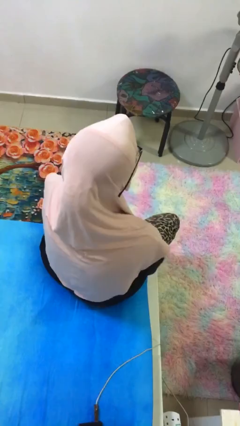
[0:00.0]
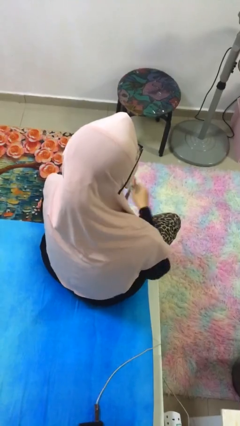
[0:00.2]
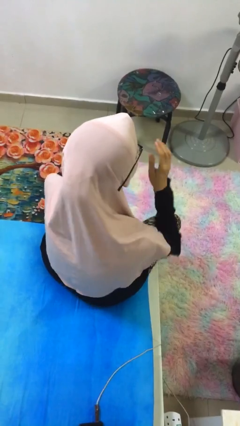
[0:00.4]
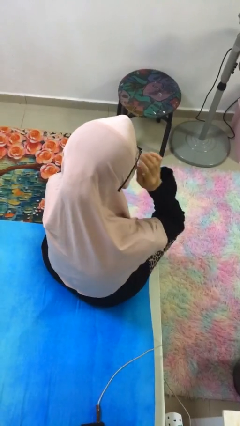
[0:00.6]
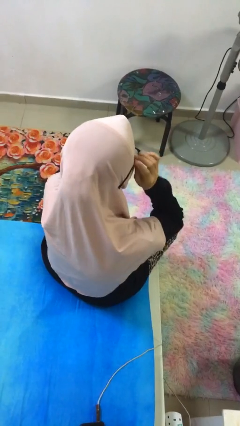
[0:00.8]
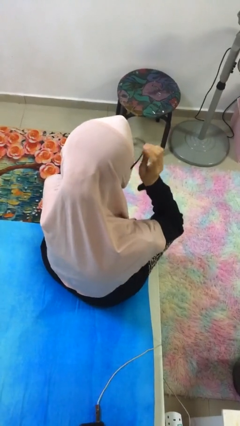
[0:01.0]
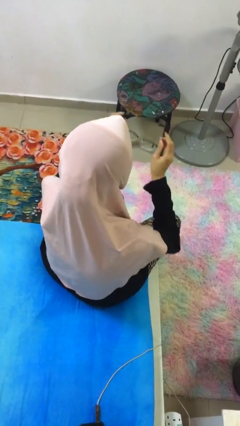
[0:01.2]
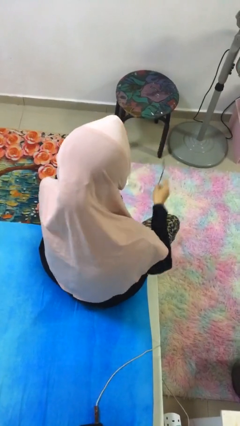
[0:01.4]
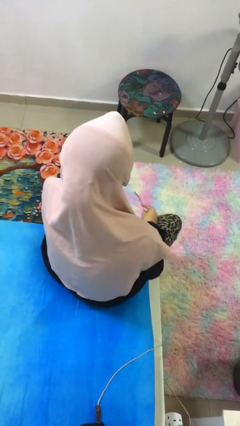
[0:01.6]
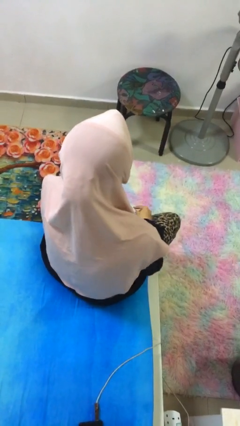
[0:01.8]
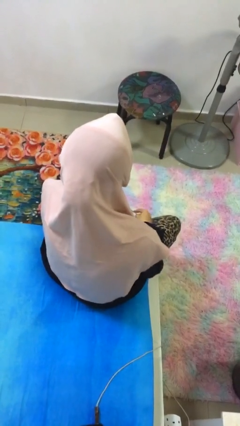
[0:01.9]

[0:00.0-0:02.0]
person takes off glasses

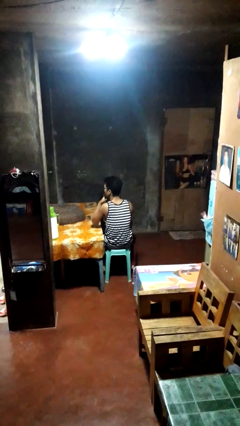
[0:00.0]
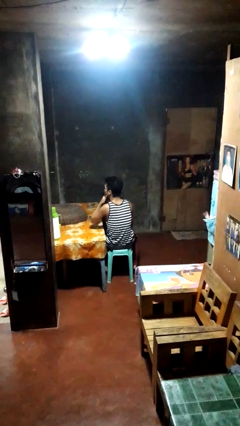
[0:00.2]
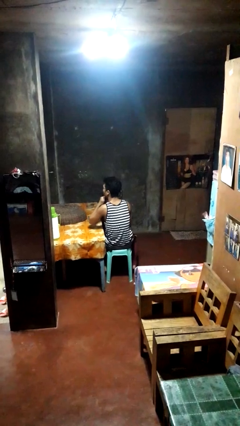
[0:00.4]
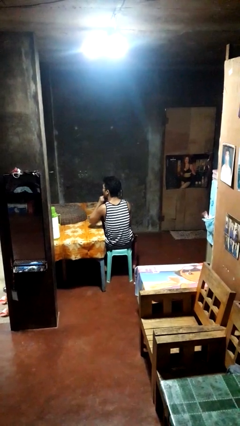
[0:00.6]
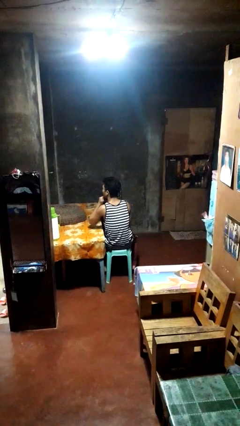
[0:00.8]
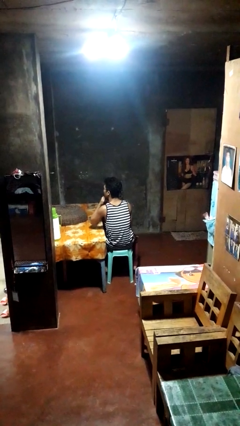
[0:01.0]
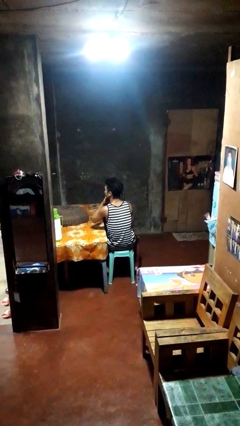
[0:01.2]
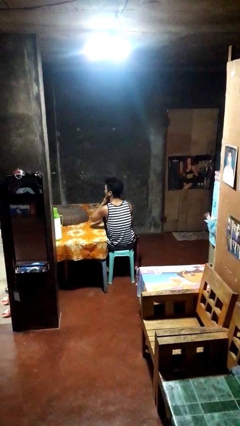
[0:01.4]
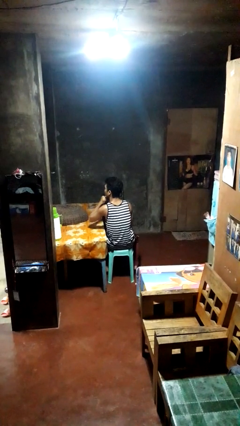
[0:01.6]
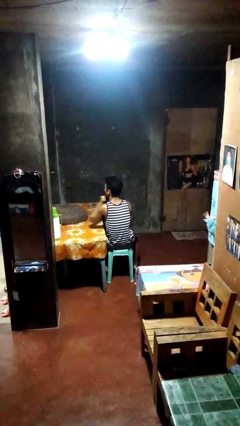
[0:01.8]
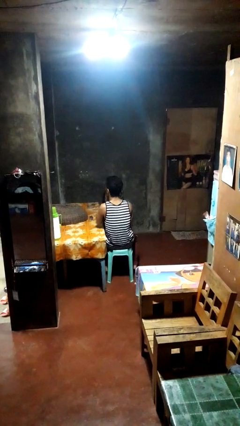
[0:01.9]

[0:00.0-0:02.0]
person strokes chin

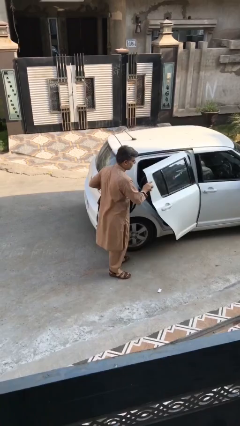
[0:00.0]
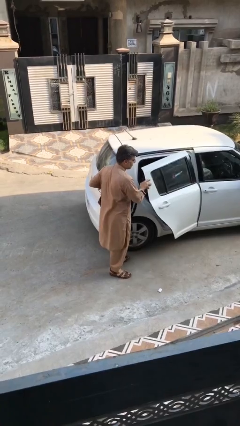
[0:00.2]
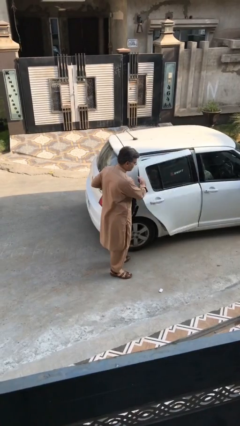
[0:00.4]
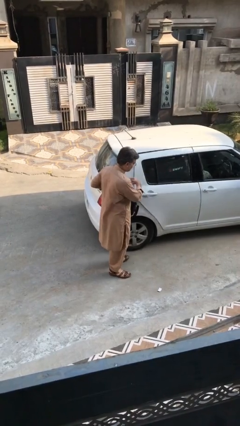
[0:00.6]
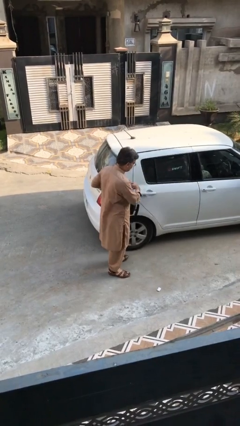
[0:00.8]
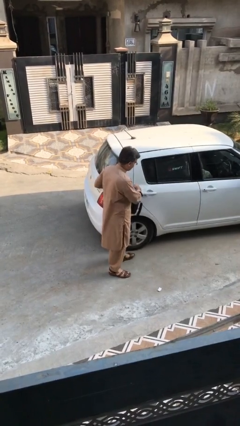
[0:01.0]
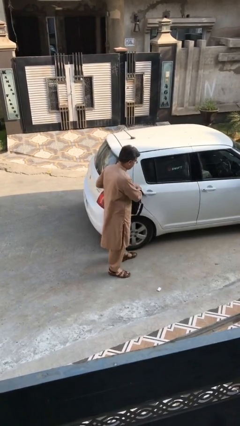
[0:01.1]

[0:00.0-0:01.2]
person closes car door

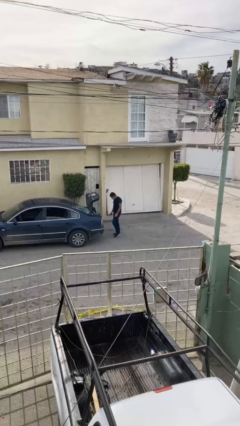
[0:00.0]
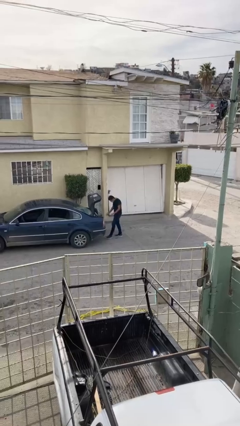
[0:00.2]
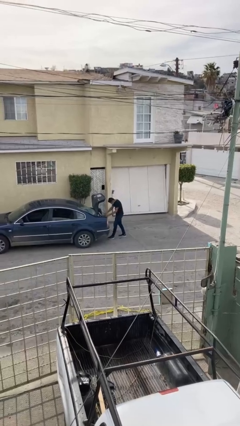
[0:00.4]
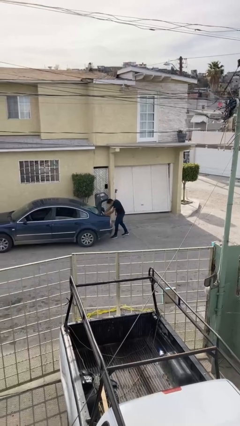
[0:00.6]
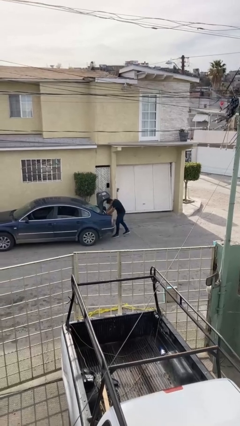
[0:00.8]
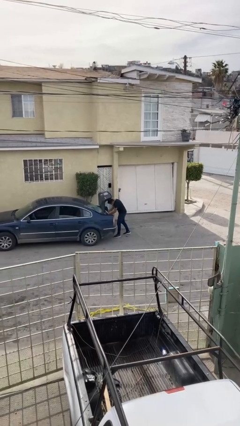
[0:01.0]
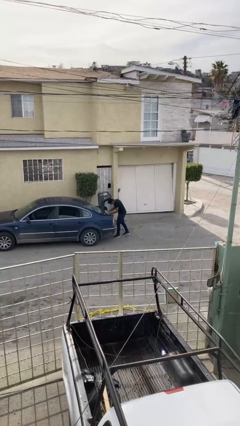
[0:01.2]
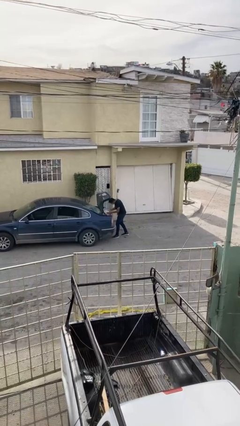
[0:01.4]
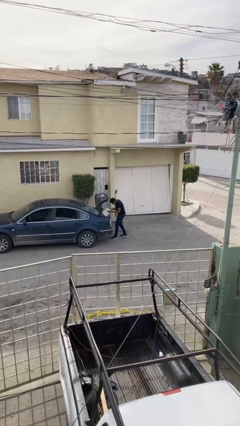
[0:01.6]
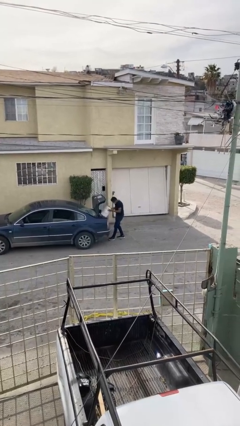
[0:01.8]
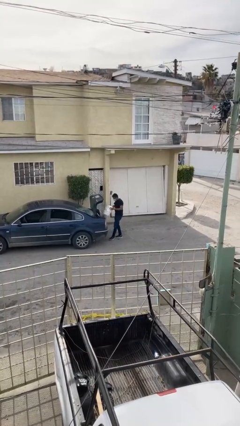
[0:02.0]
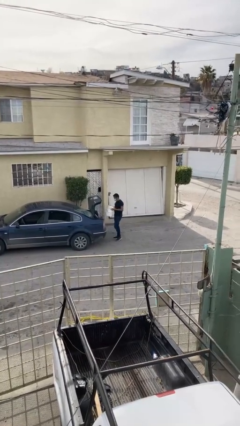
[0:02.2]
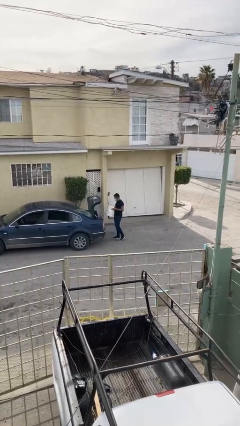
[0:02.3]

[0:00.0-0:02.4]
person unloads car

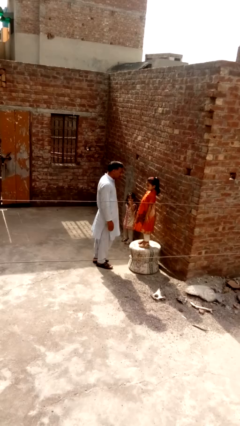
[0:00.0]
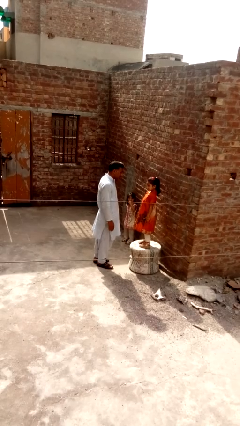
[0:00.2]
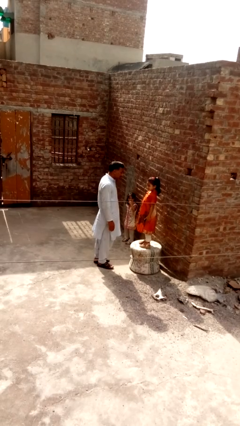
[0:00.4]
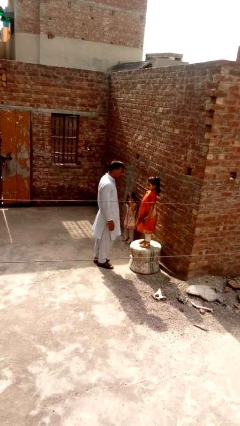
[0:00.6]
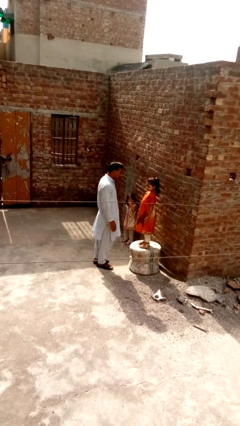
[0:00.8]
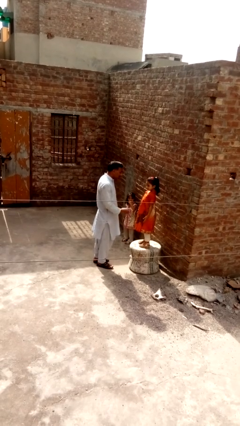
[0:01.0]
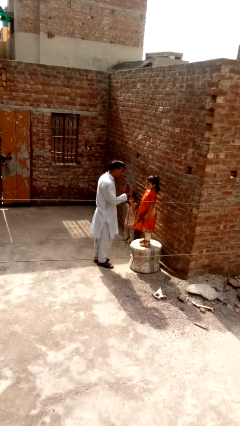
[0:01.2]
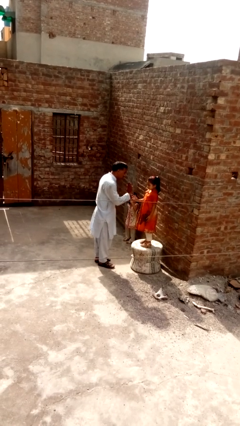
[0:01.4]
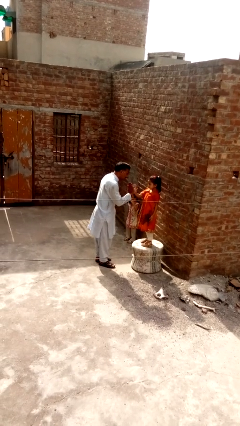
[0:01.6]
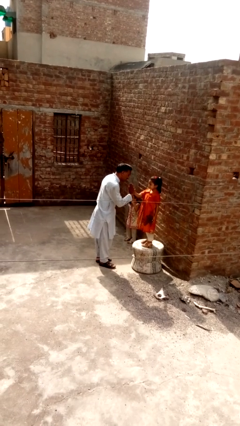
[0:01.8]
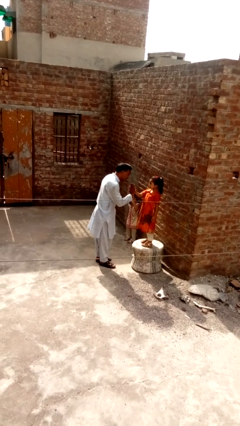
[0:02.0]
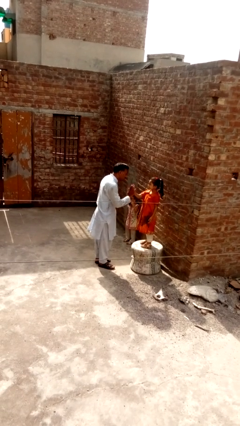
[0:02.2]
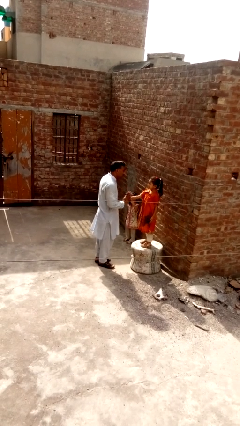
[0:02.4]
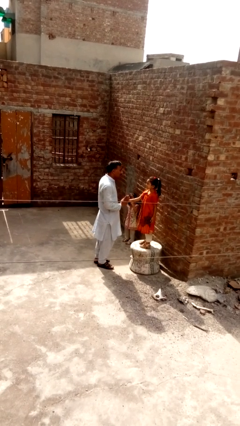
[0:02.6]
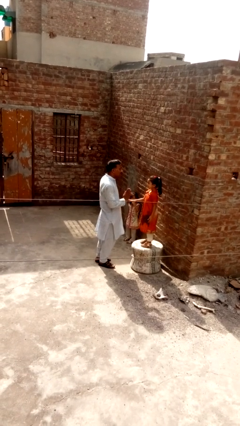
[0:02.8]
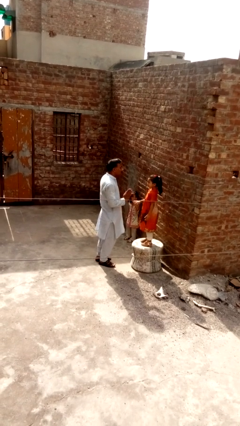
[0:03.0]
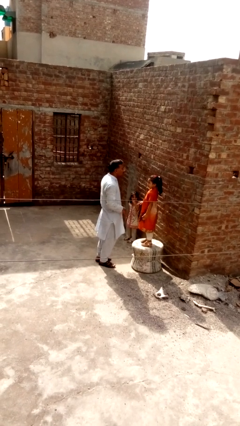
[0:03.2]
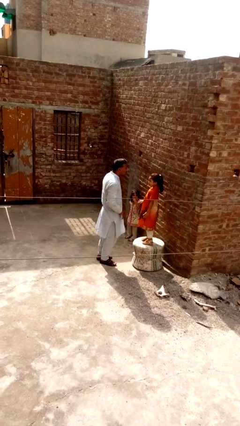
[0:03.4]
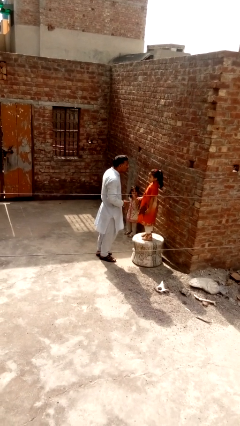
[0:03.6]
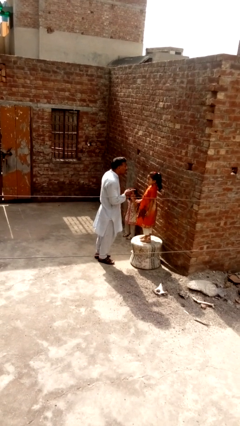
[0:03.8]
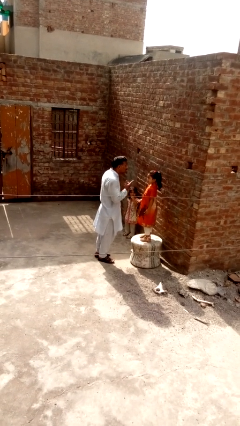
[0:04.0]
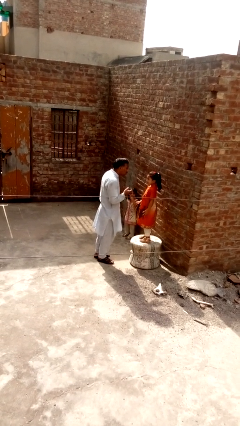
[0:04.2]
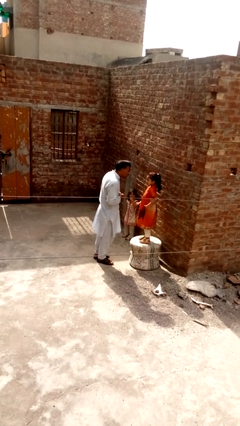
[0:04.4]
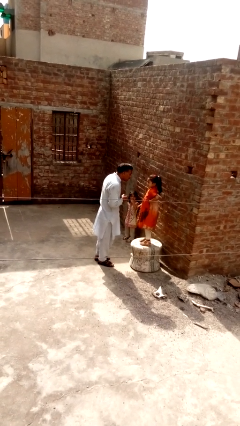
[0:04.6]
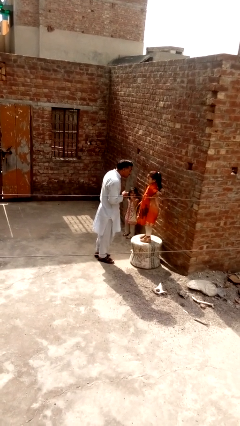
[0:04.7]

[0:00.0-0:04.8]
person highfives hand

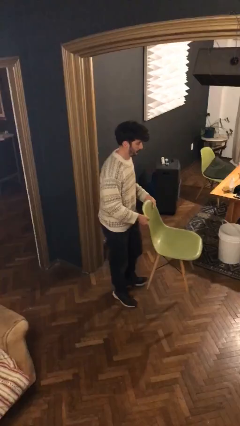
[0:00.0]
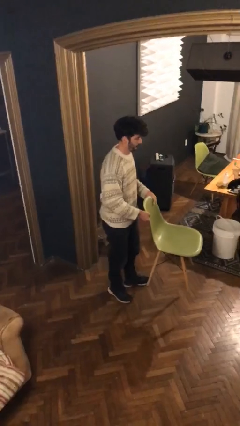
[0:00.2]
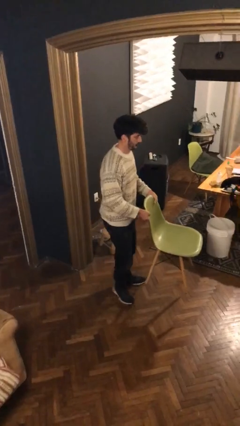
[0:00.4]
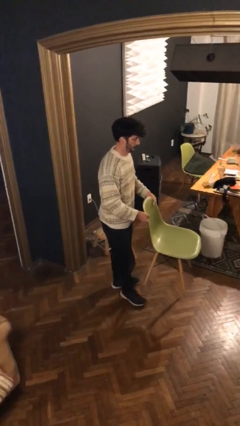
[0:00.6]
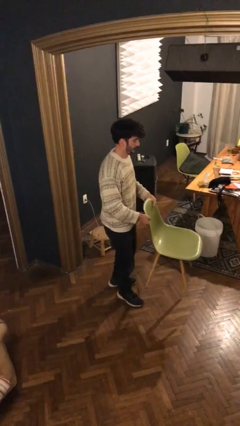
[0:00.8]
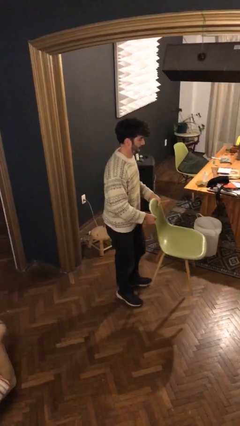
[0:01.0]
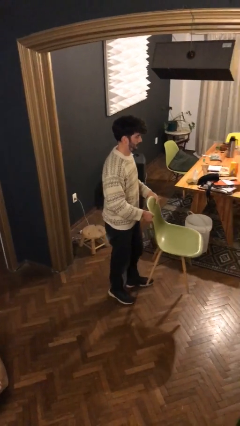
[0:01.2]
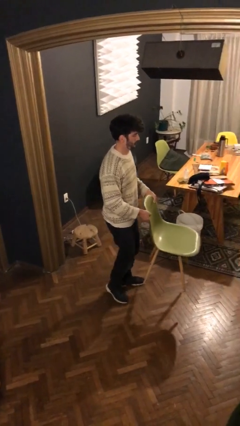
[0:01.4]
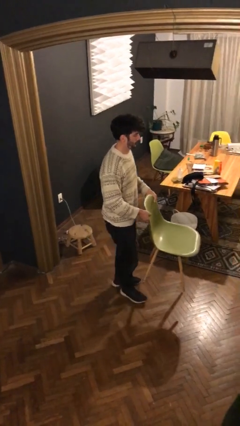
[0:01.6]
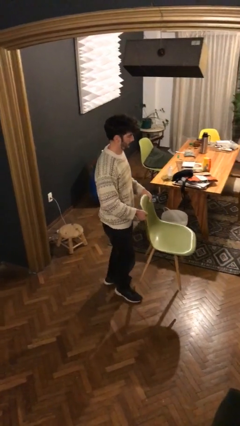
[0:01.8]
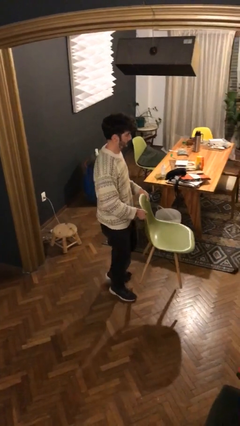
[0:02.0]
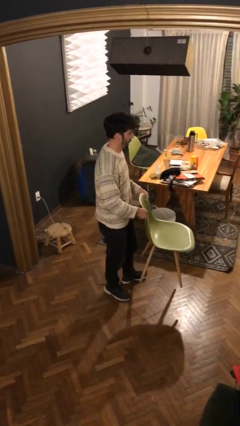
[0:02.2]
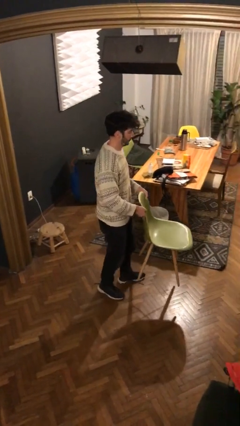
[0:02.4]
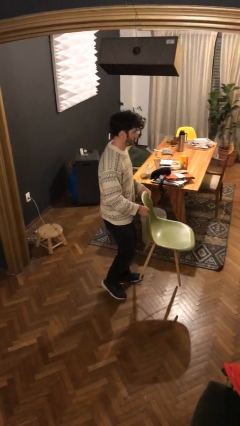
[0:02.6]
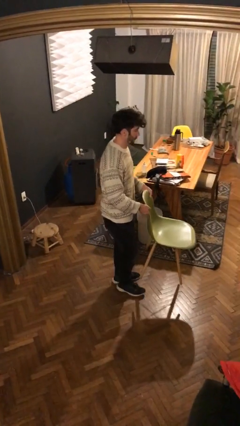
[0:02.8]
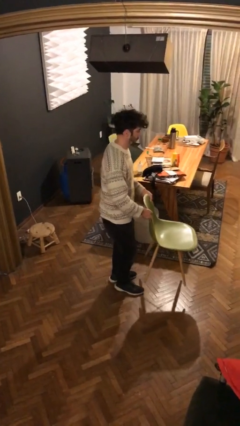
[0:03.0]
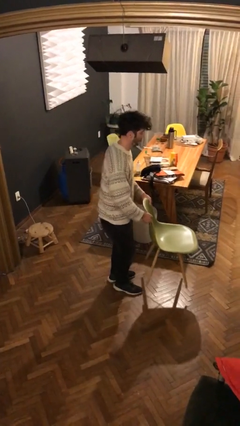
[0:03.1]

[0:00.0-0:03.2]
person carries heavy object

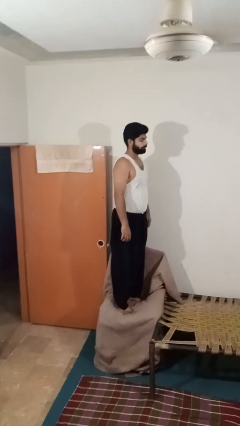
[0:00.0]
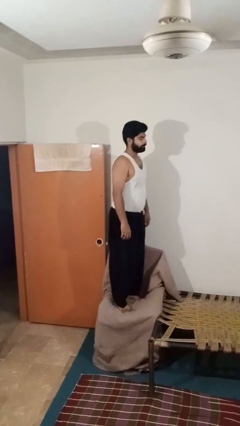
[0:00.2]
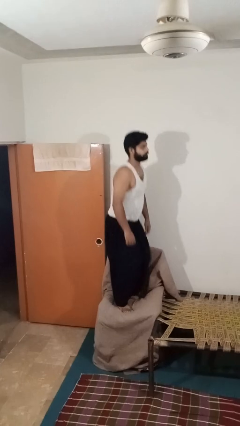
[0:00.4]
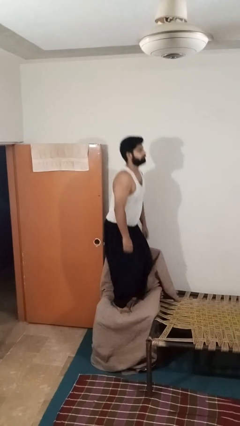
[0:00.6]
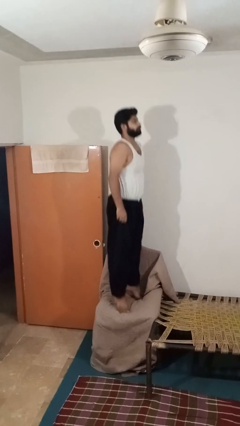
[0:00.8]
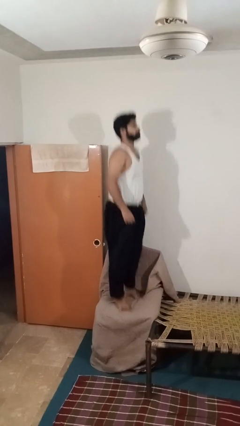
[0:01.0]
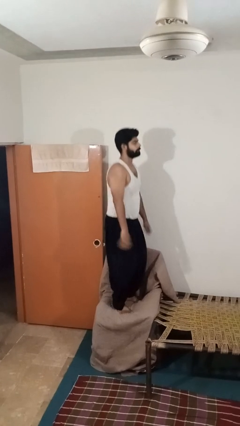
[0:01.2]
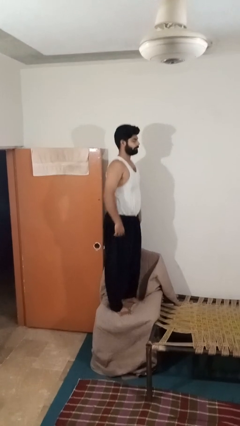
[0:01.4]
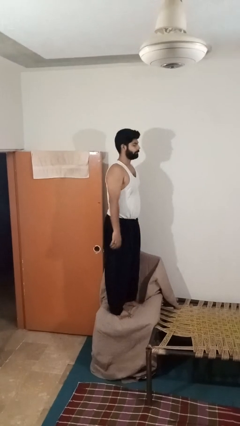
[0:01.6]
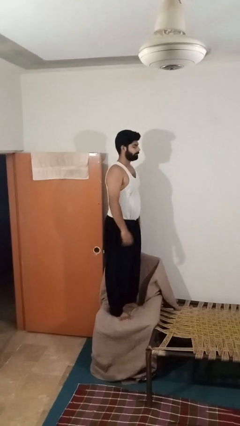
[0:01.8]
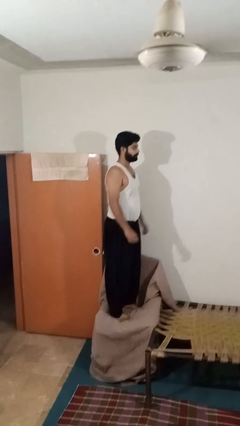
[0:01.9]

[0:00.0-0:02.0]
person jumps on couch
